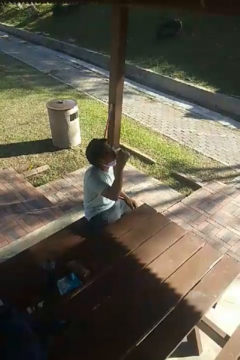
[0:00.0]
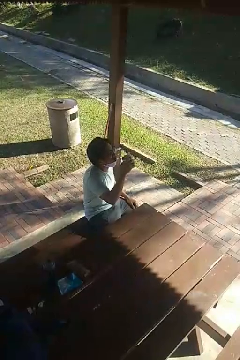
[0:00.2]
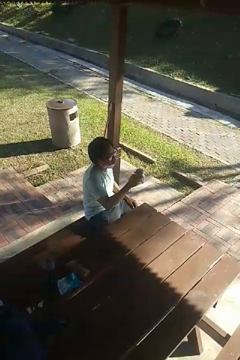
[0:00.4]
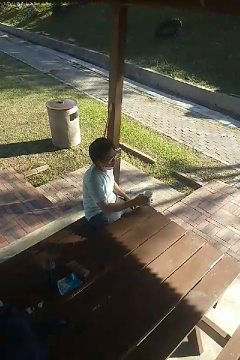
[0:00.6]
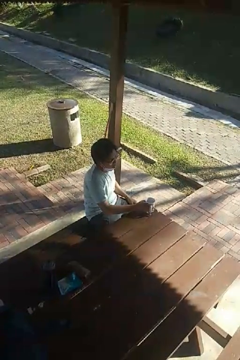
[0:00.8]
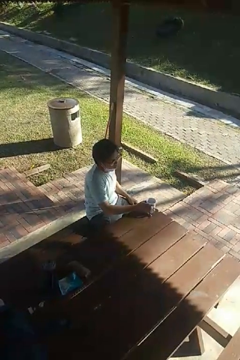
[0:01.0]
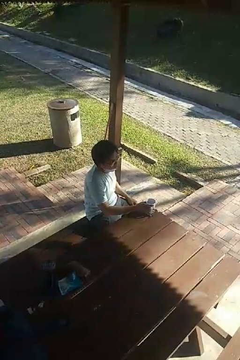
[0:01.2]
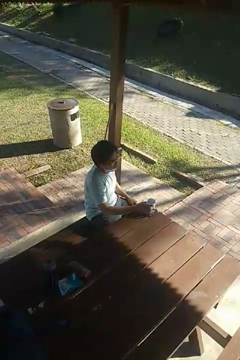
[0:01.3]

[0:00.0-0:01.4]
person puts down object on table

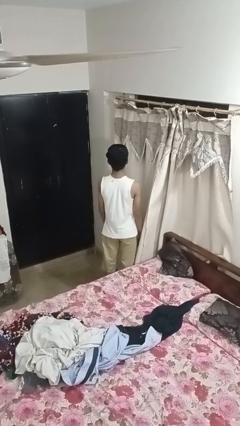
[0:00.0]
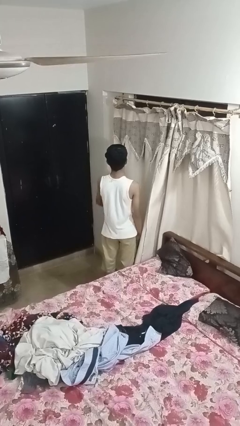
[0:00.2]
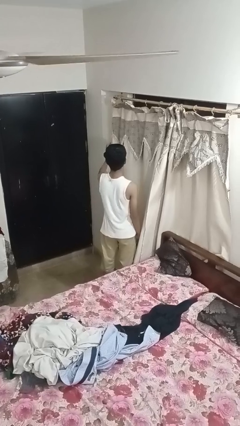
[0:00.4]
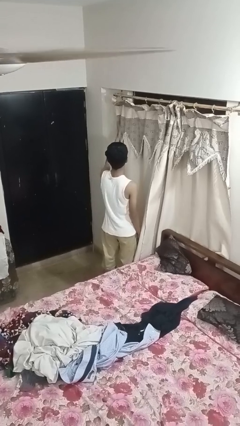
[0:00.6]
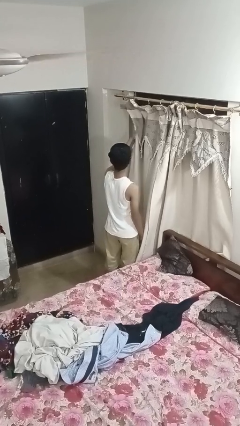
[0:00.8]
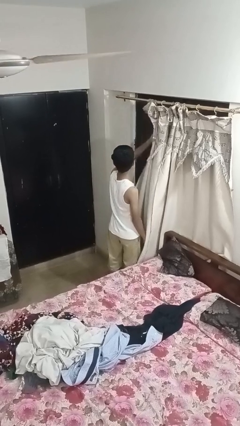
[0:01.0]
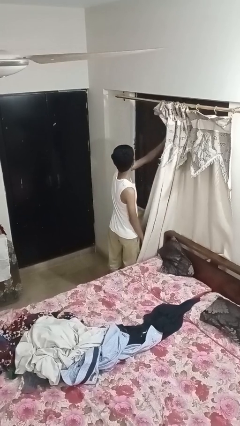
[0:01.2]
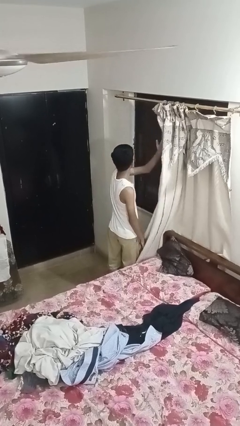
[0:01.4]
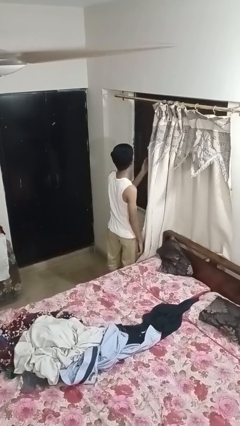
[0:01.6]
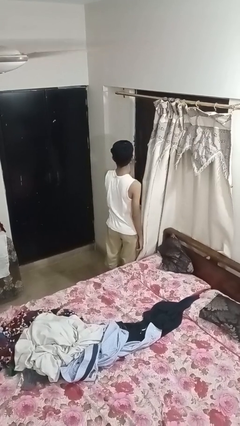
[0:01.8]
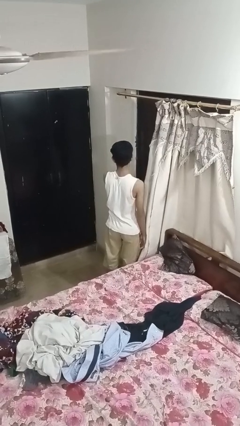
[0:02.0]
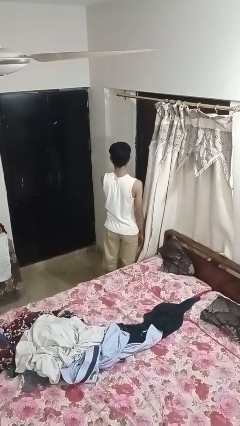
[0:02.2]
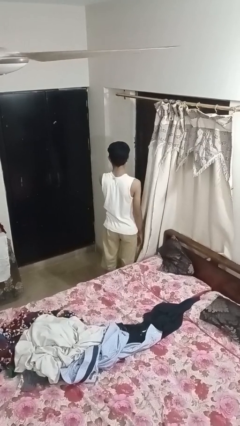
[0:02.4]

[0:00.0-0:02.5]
person opens curtains

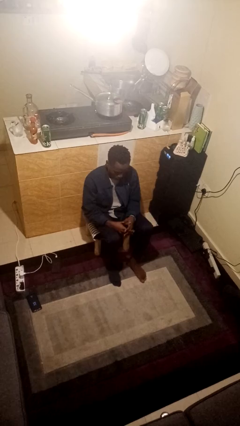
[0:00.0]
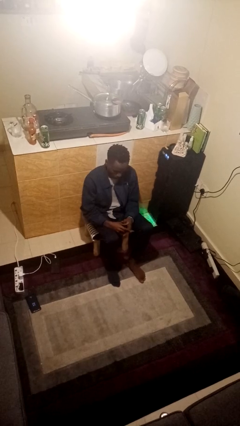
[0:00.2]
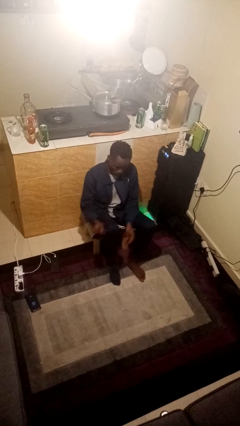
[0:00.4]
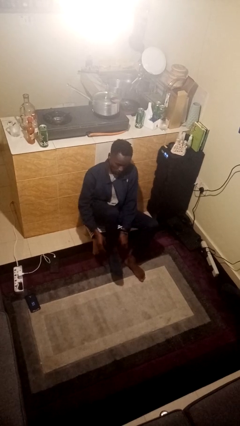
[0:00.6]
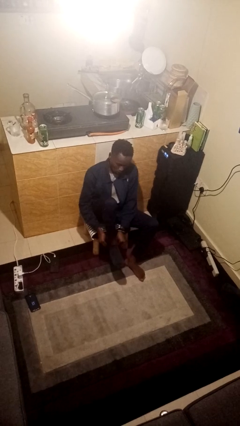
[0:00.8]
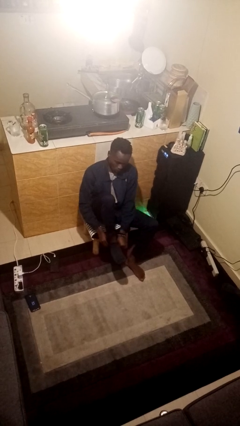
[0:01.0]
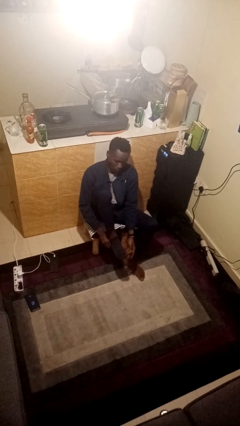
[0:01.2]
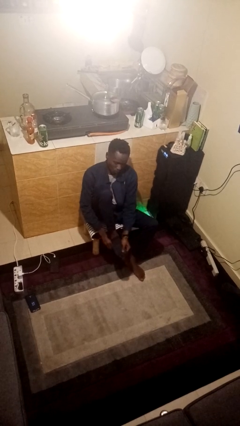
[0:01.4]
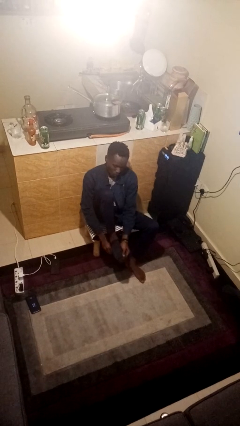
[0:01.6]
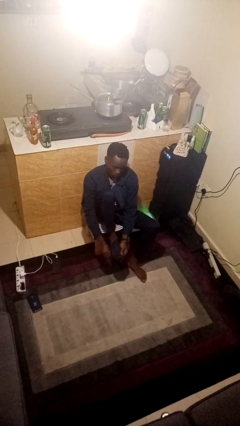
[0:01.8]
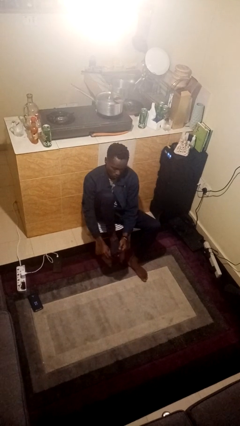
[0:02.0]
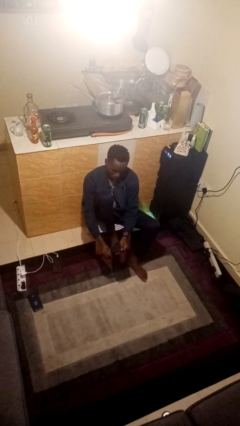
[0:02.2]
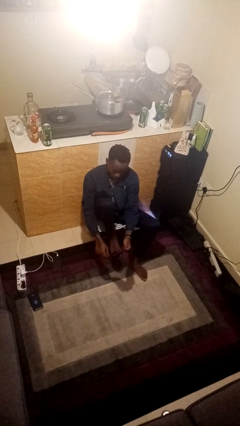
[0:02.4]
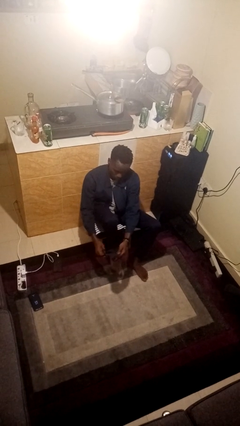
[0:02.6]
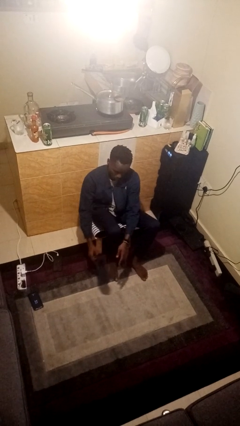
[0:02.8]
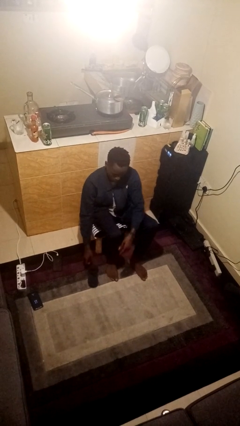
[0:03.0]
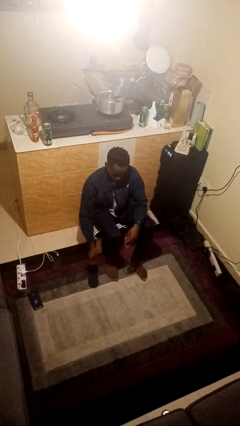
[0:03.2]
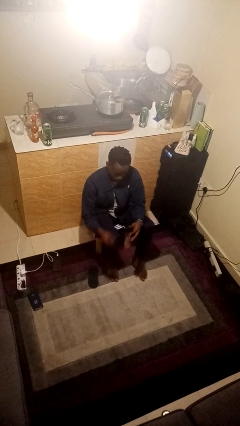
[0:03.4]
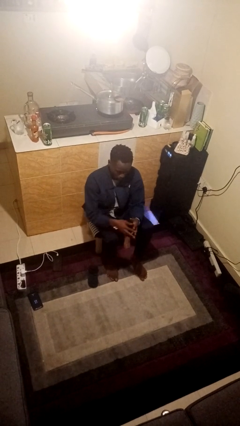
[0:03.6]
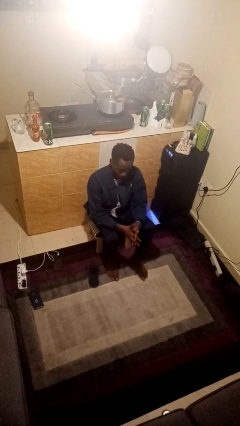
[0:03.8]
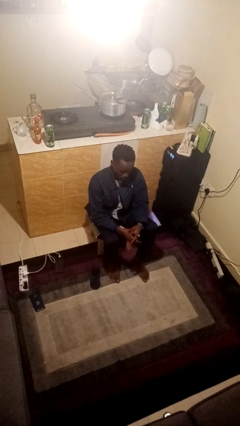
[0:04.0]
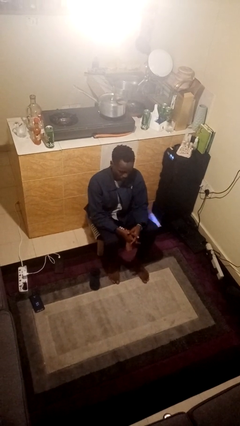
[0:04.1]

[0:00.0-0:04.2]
person takes off socks

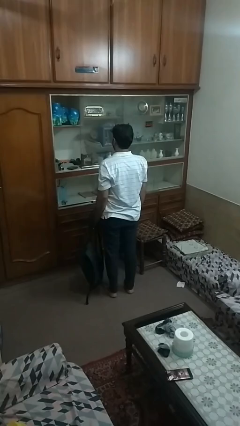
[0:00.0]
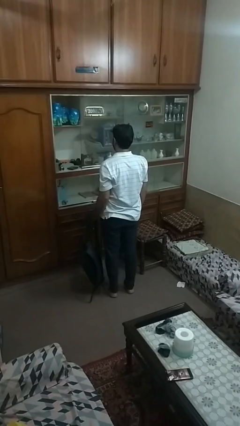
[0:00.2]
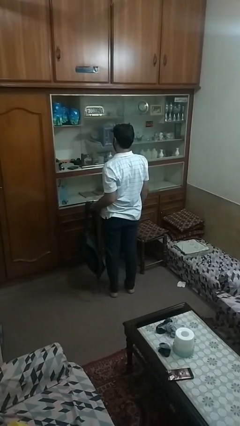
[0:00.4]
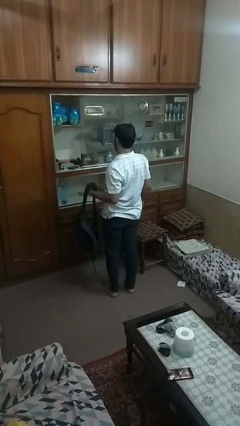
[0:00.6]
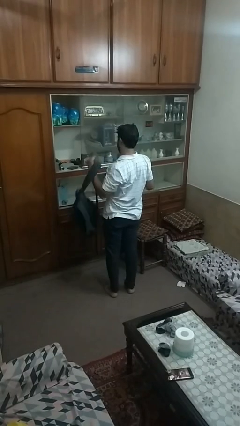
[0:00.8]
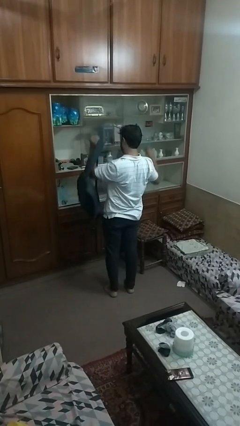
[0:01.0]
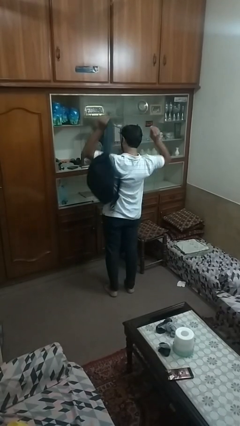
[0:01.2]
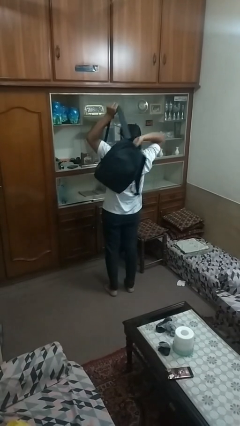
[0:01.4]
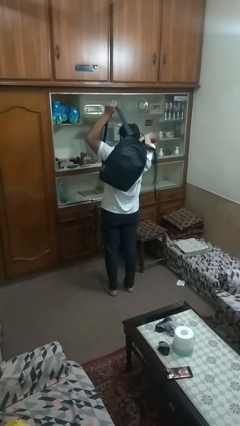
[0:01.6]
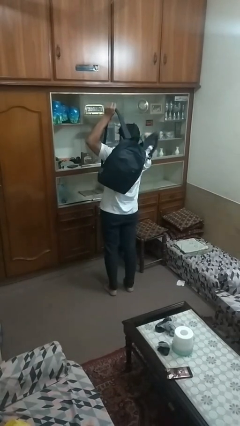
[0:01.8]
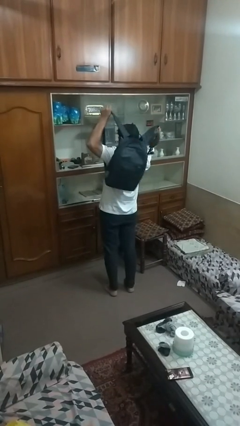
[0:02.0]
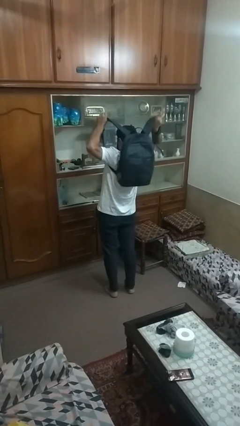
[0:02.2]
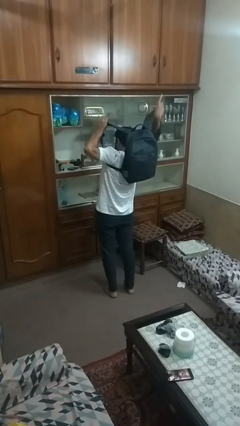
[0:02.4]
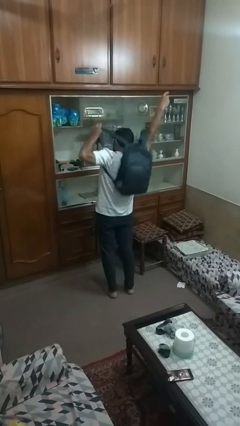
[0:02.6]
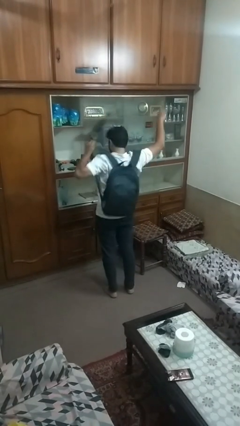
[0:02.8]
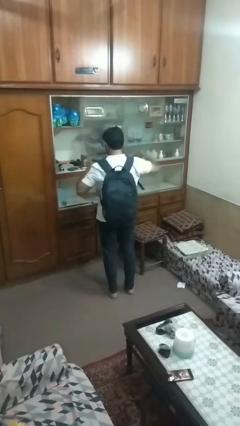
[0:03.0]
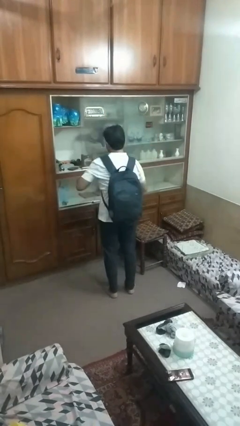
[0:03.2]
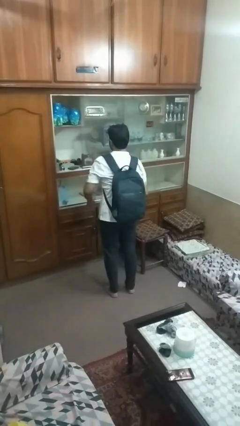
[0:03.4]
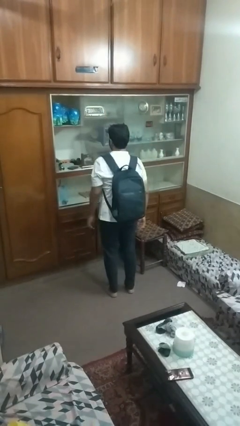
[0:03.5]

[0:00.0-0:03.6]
person puts on backpack

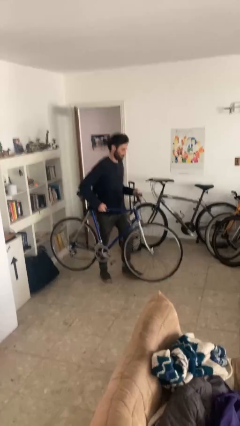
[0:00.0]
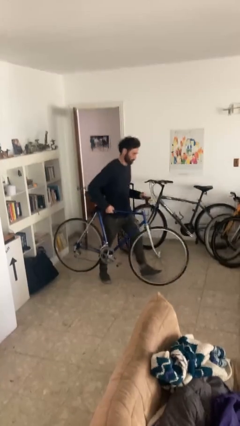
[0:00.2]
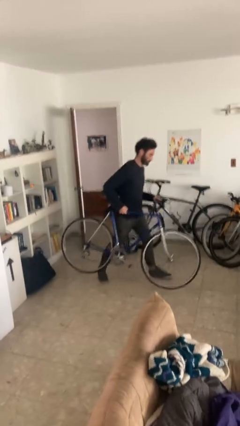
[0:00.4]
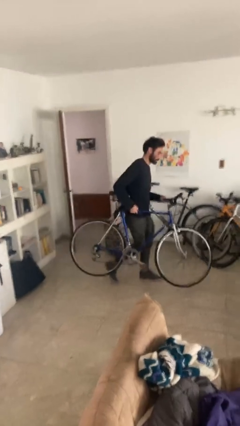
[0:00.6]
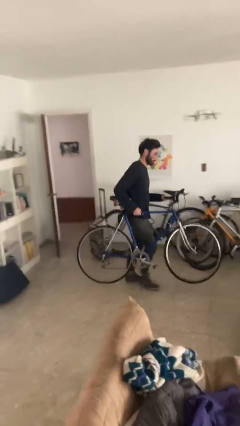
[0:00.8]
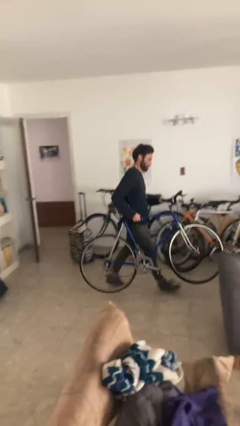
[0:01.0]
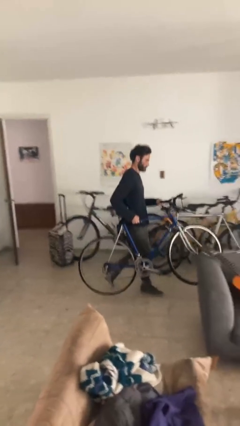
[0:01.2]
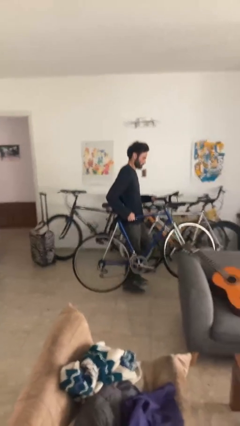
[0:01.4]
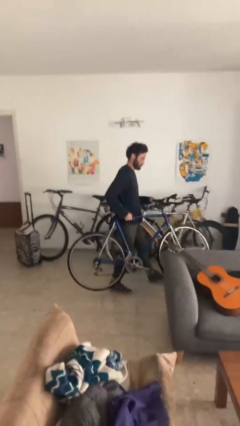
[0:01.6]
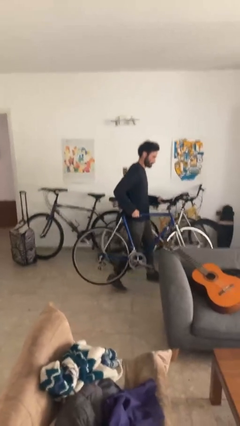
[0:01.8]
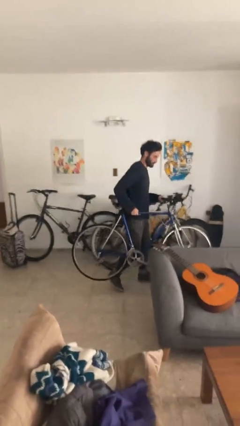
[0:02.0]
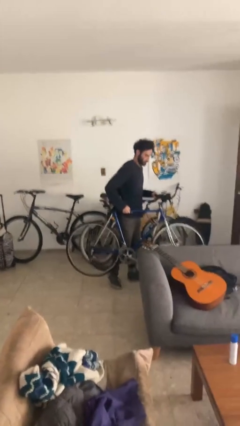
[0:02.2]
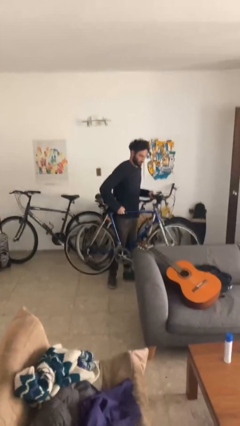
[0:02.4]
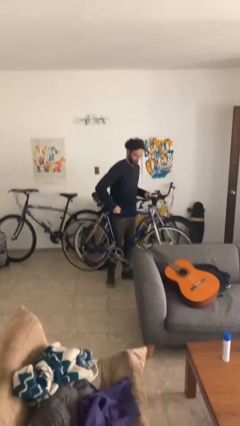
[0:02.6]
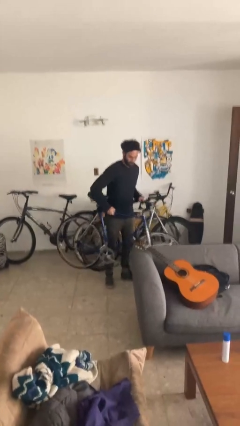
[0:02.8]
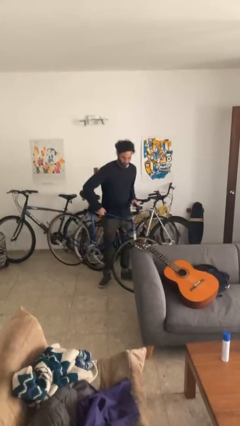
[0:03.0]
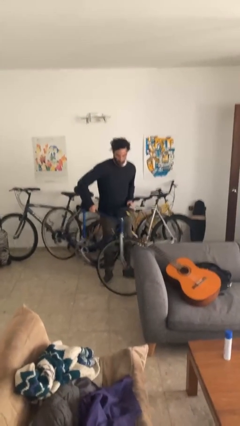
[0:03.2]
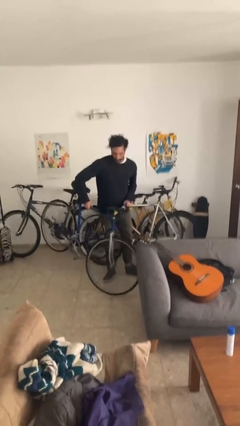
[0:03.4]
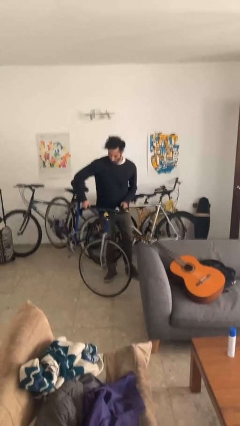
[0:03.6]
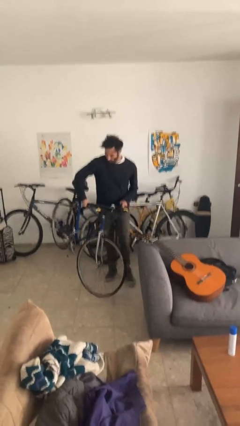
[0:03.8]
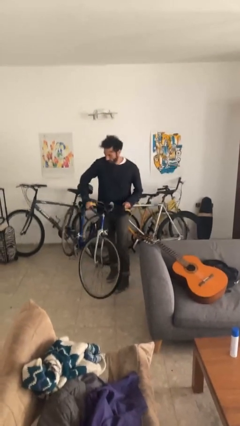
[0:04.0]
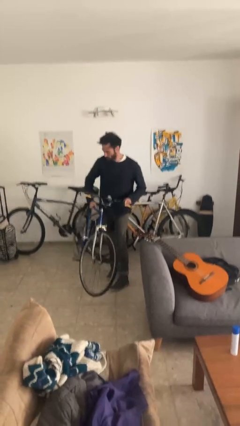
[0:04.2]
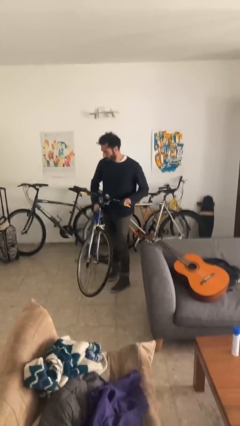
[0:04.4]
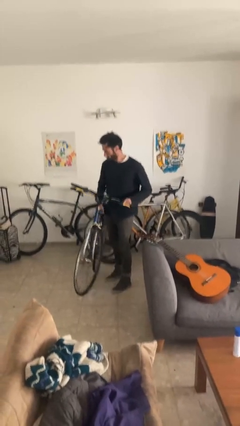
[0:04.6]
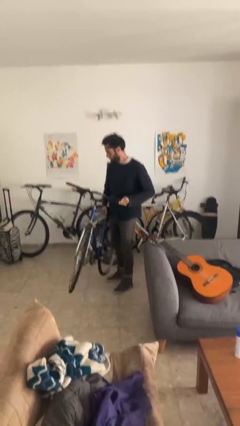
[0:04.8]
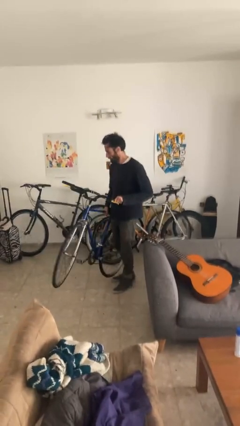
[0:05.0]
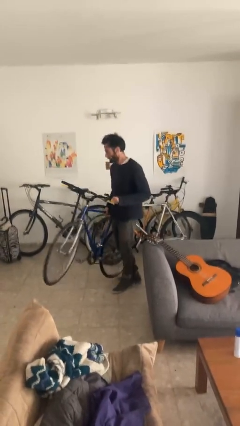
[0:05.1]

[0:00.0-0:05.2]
person carries bicycle
